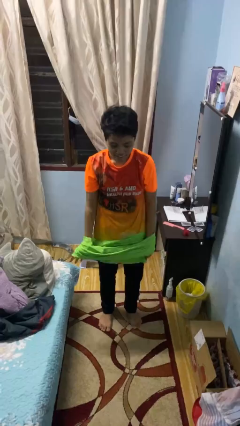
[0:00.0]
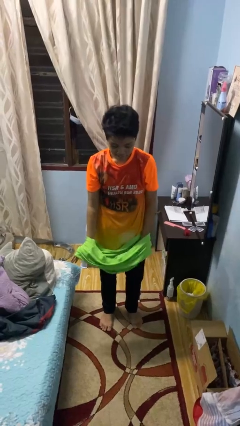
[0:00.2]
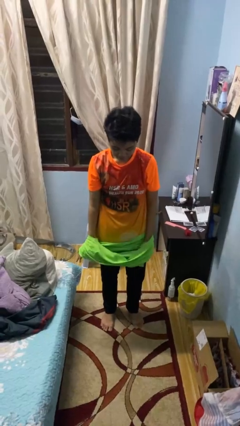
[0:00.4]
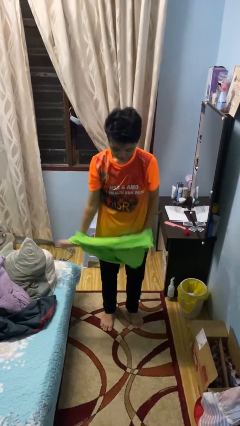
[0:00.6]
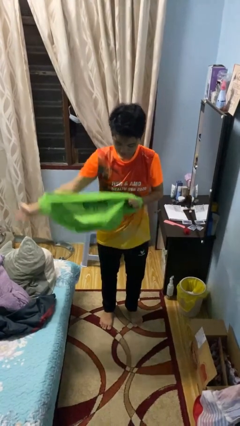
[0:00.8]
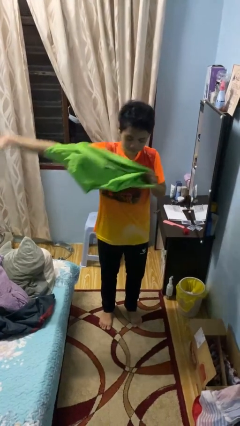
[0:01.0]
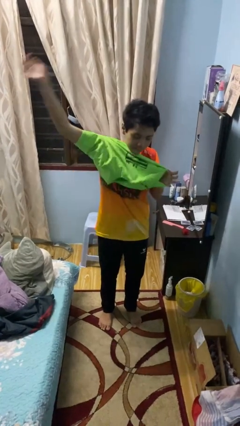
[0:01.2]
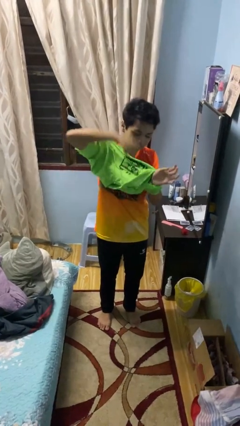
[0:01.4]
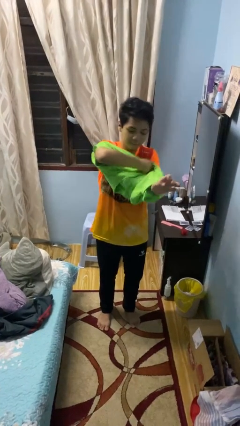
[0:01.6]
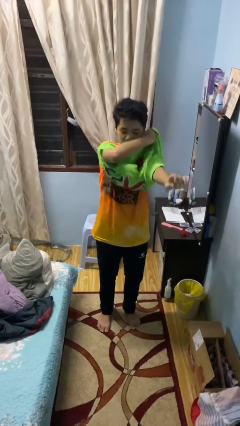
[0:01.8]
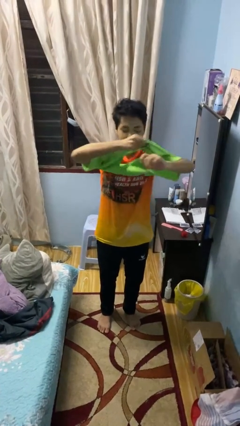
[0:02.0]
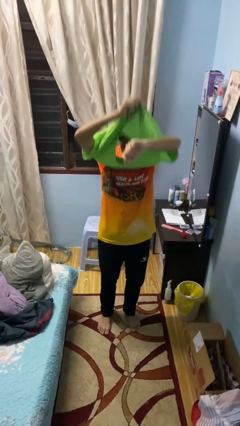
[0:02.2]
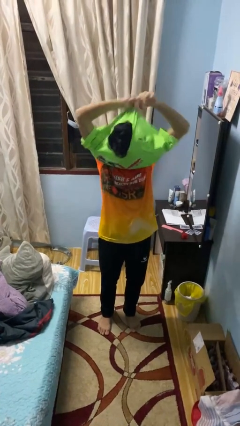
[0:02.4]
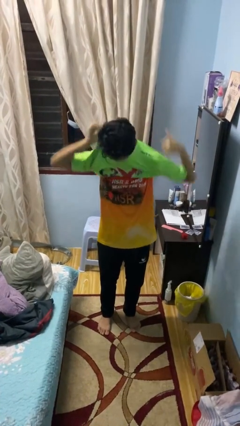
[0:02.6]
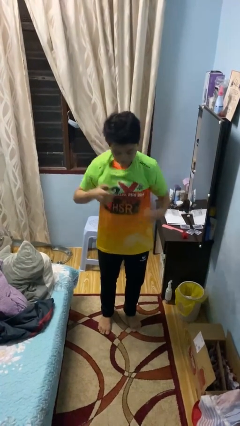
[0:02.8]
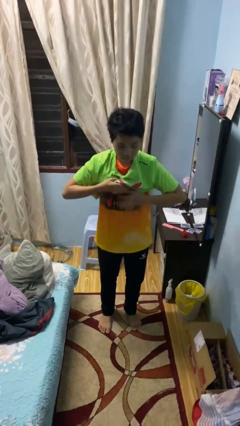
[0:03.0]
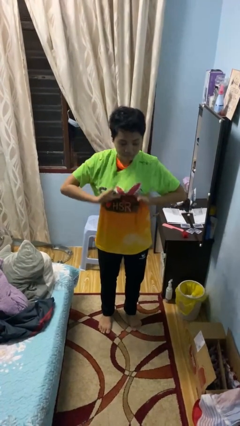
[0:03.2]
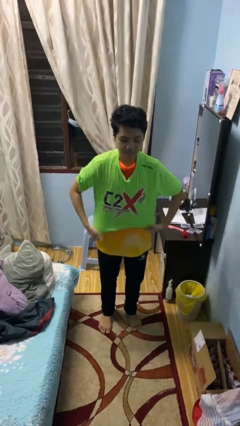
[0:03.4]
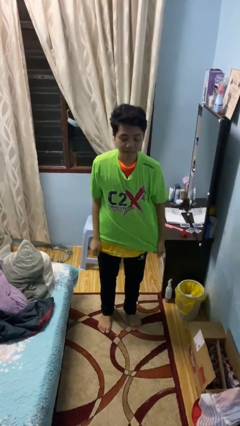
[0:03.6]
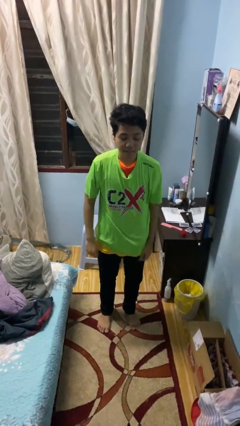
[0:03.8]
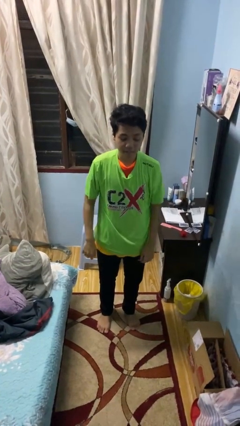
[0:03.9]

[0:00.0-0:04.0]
person puts on shirt

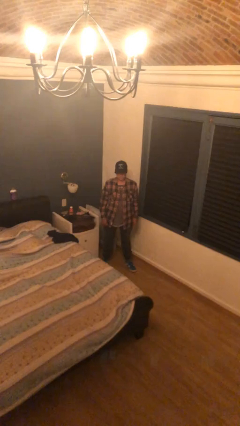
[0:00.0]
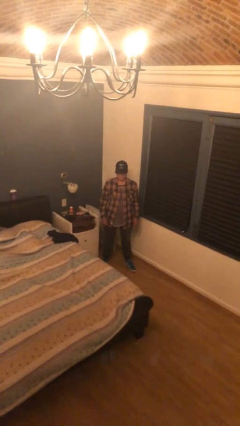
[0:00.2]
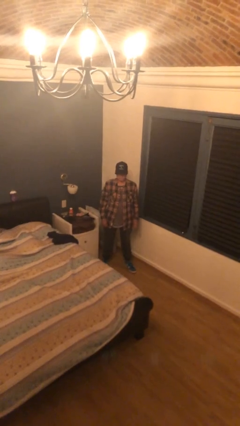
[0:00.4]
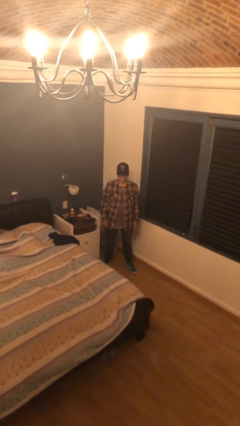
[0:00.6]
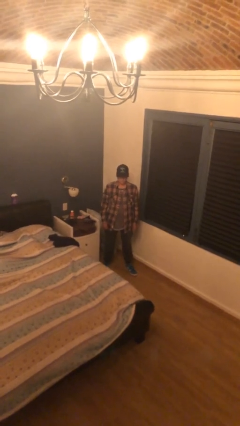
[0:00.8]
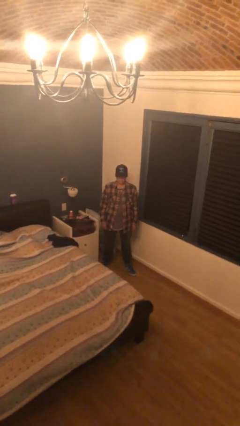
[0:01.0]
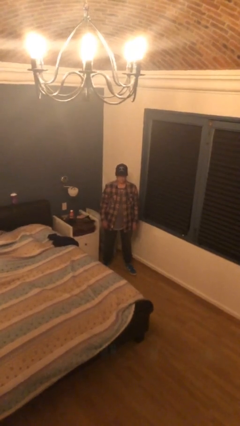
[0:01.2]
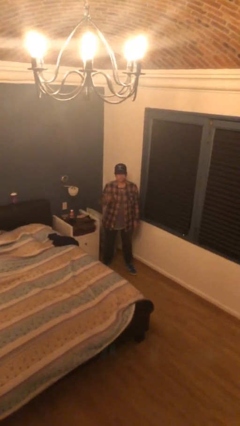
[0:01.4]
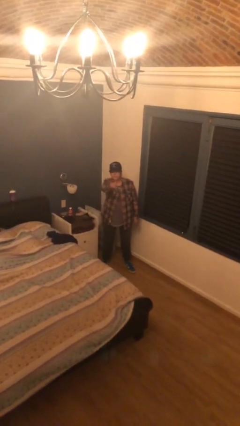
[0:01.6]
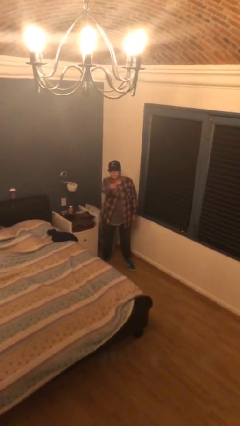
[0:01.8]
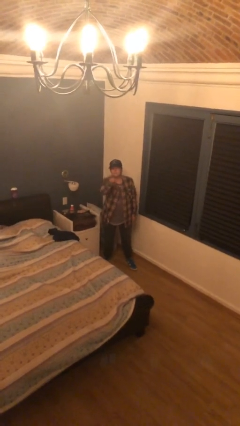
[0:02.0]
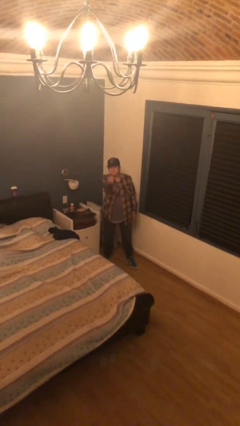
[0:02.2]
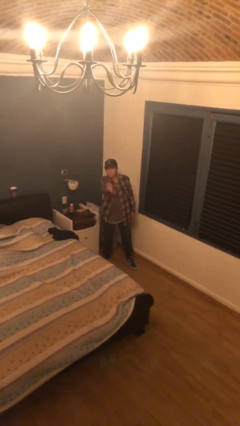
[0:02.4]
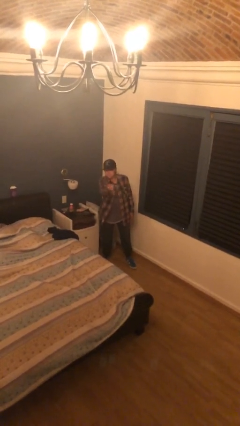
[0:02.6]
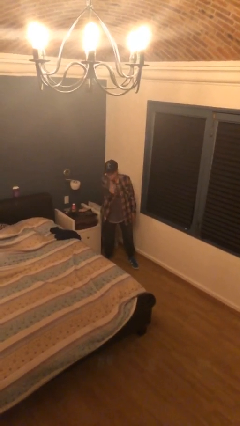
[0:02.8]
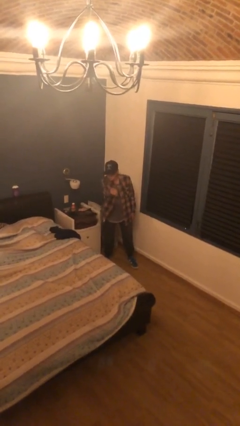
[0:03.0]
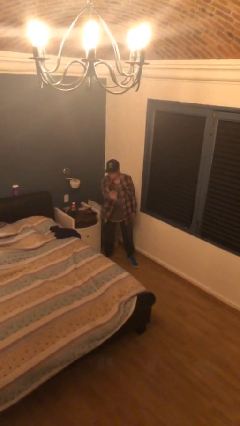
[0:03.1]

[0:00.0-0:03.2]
person points at person

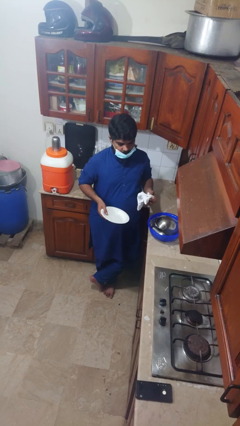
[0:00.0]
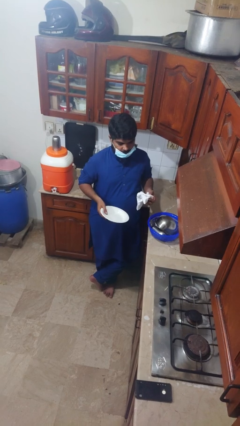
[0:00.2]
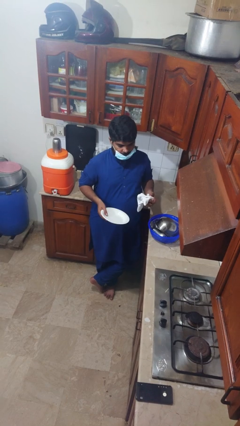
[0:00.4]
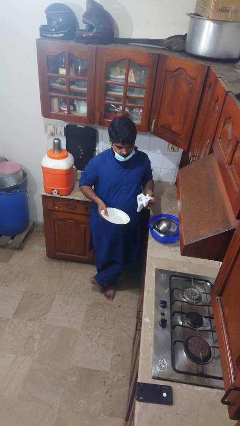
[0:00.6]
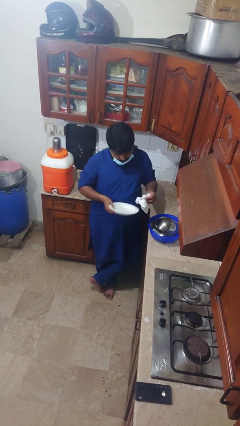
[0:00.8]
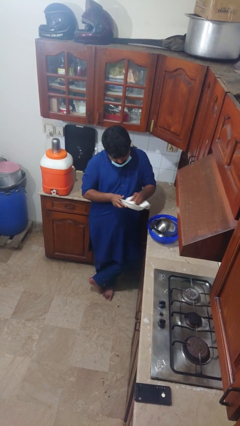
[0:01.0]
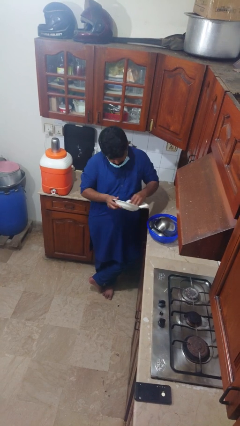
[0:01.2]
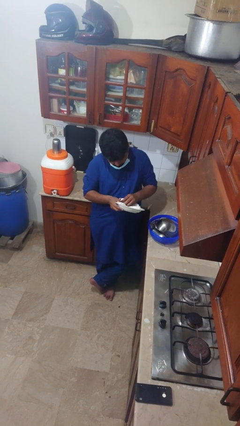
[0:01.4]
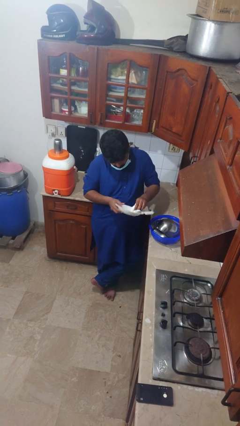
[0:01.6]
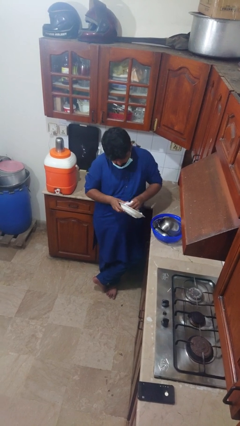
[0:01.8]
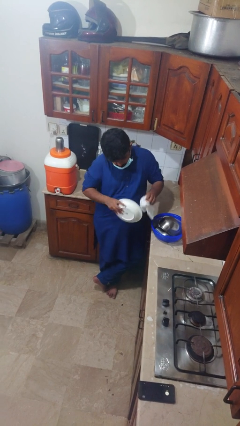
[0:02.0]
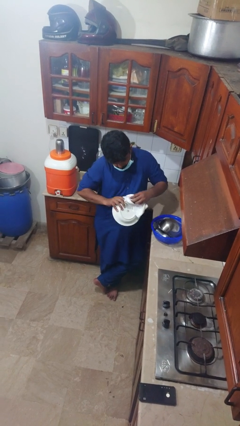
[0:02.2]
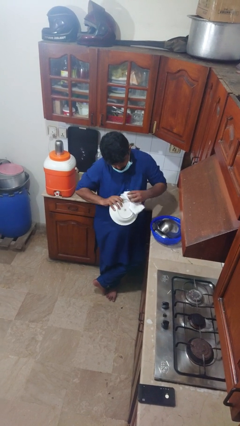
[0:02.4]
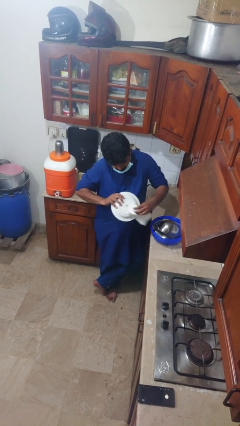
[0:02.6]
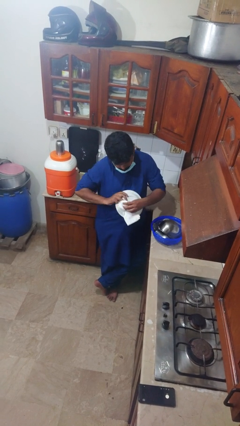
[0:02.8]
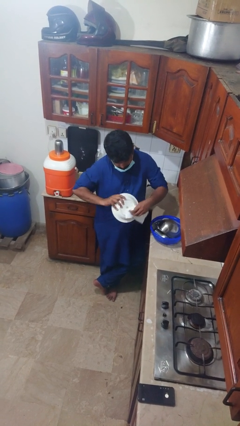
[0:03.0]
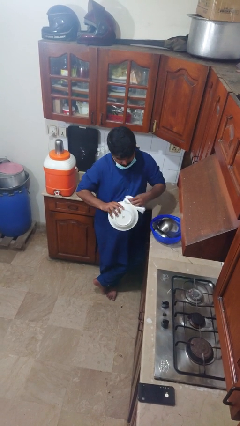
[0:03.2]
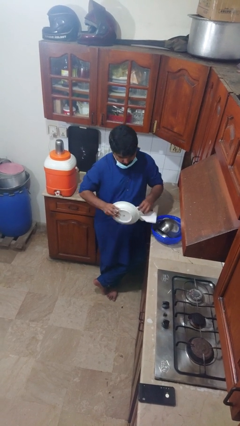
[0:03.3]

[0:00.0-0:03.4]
person dries dish

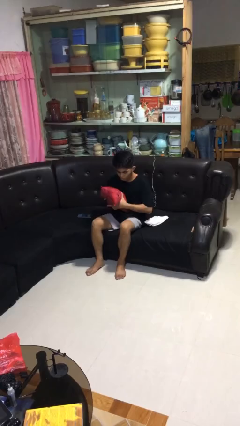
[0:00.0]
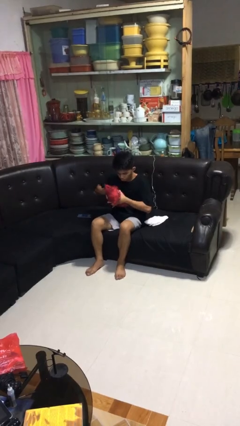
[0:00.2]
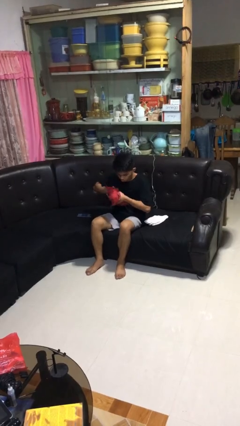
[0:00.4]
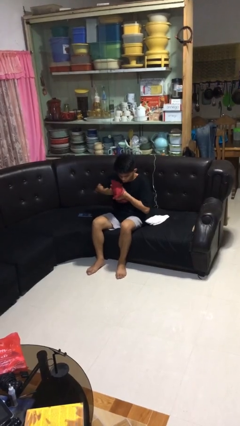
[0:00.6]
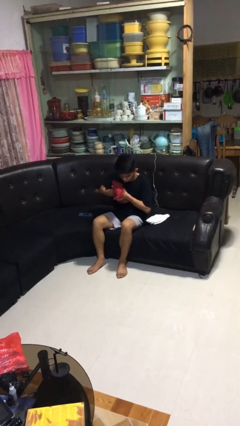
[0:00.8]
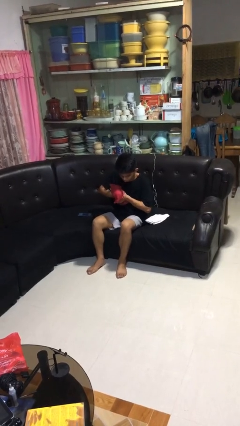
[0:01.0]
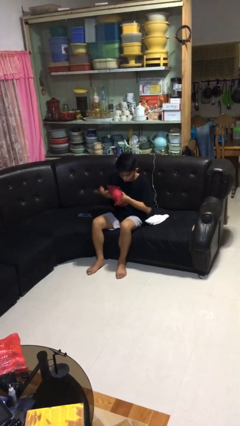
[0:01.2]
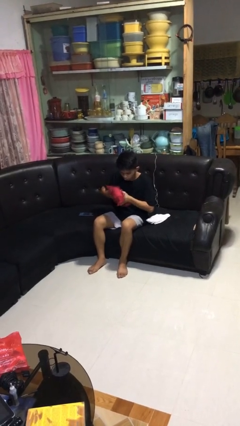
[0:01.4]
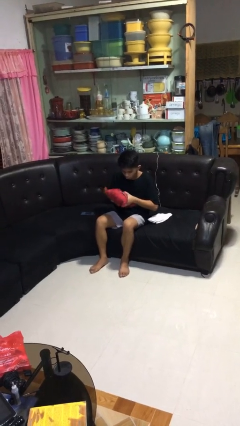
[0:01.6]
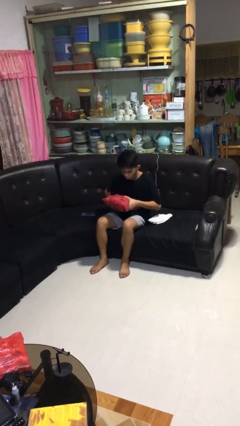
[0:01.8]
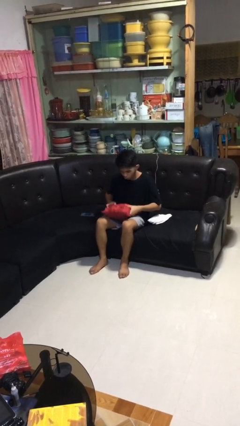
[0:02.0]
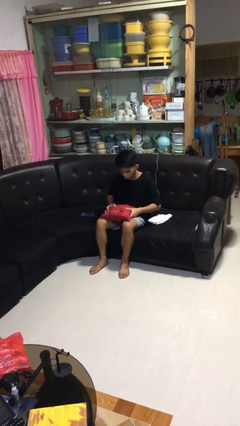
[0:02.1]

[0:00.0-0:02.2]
person squeezes object

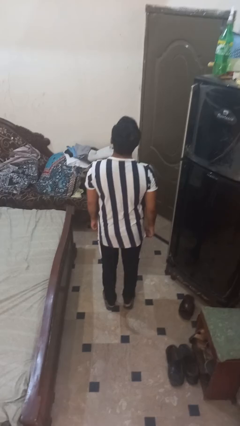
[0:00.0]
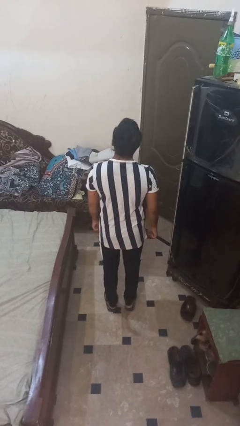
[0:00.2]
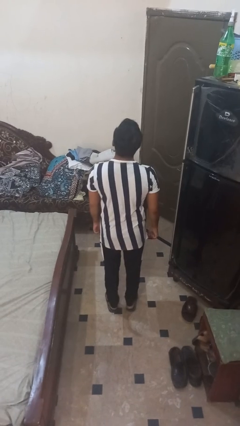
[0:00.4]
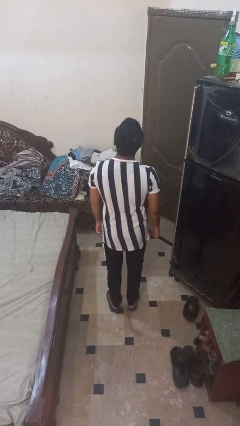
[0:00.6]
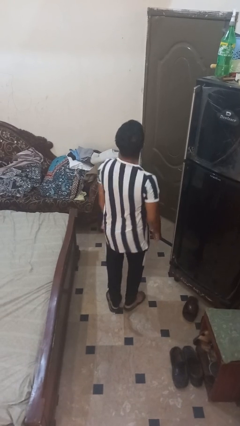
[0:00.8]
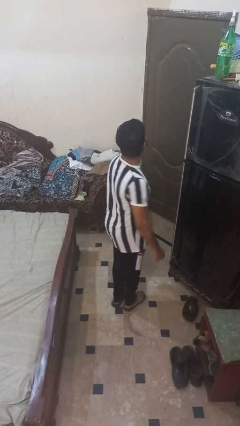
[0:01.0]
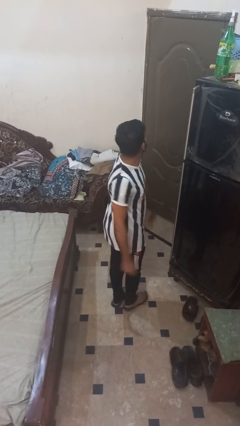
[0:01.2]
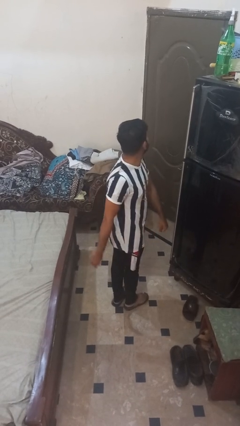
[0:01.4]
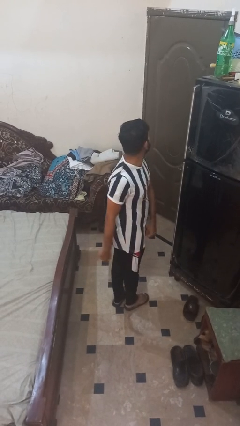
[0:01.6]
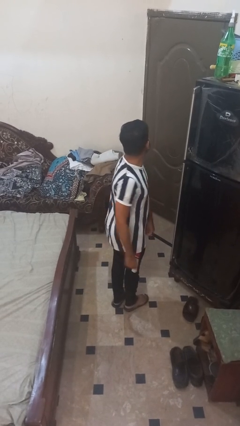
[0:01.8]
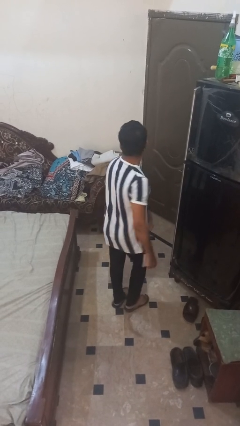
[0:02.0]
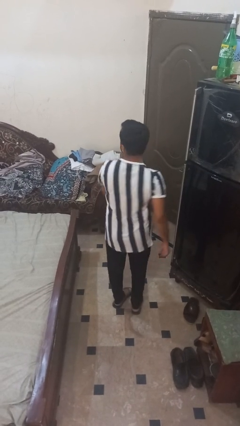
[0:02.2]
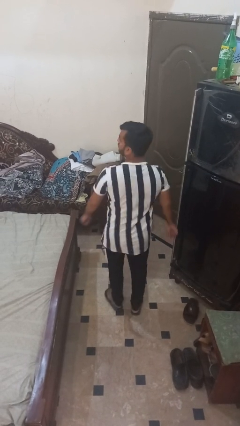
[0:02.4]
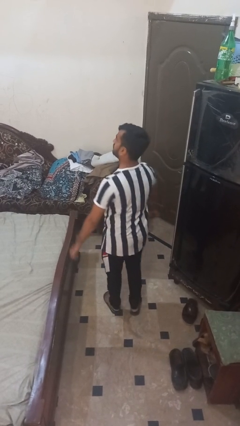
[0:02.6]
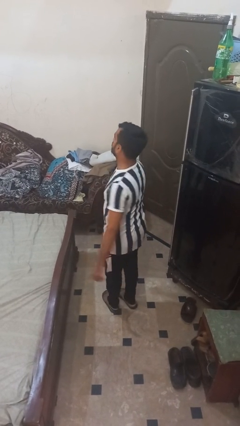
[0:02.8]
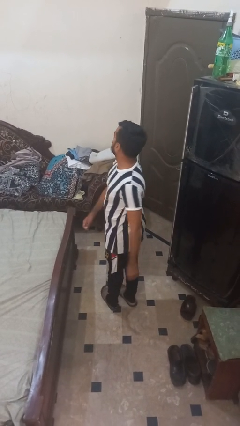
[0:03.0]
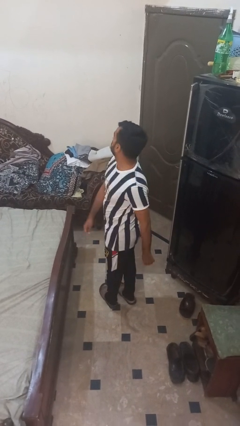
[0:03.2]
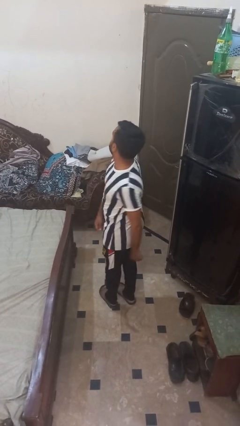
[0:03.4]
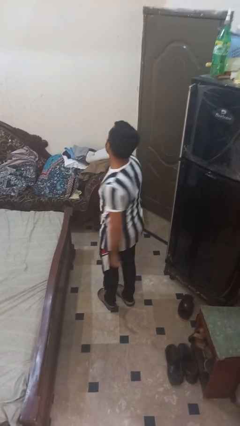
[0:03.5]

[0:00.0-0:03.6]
person twirls

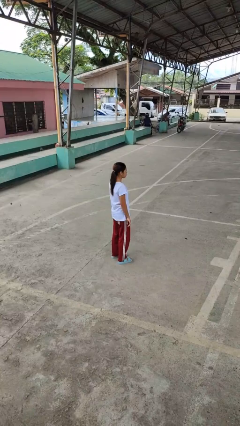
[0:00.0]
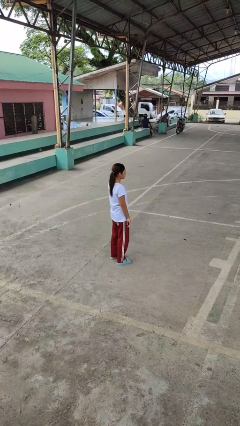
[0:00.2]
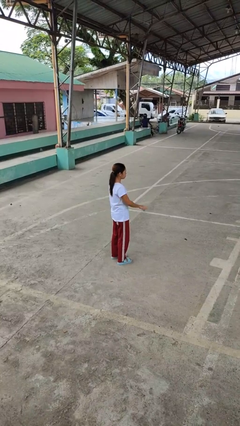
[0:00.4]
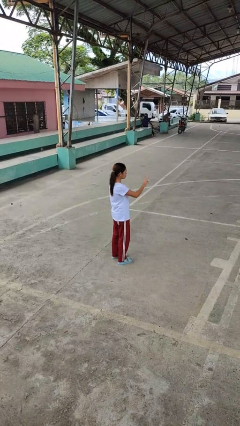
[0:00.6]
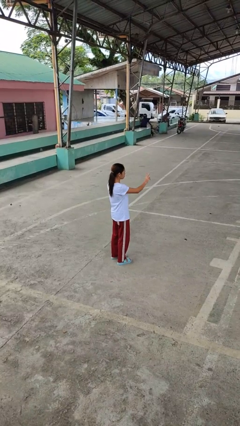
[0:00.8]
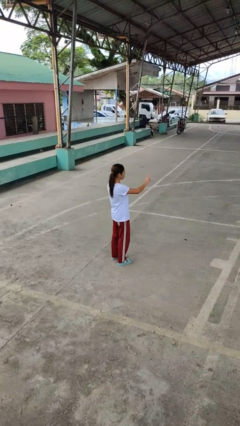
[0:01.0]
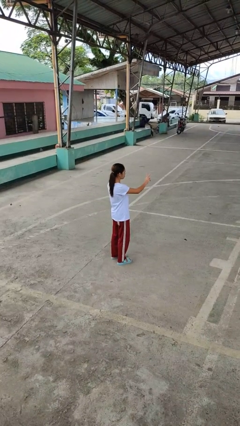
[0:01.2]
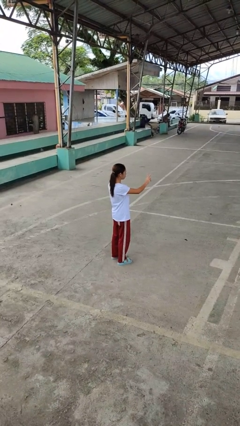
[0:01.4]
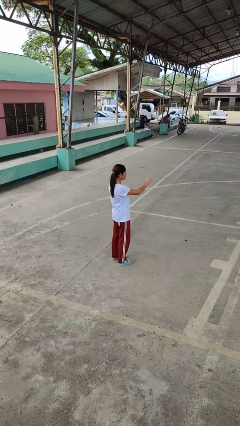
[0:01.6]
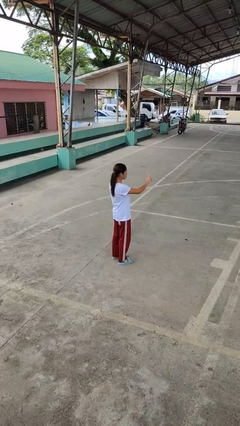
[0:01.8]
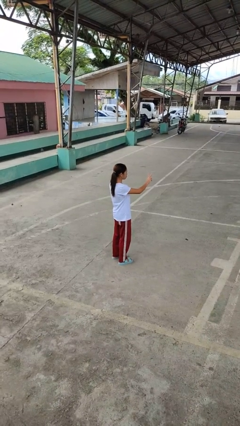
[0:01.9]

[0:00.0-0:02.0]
person gestures peace
